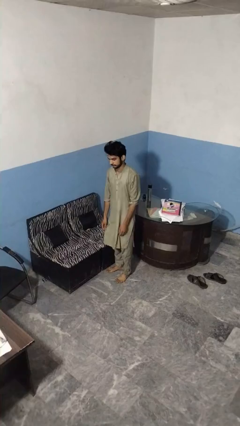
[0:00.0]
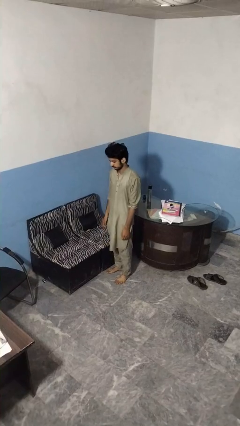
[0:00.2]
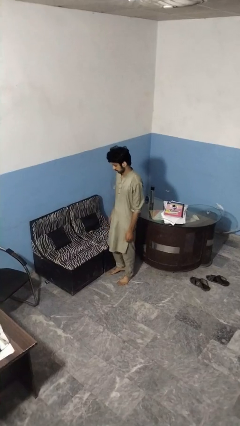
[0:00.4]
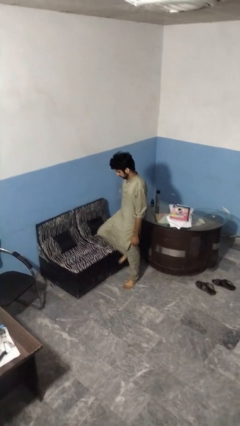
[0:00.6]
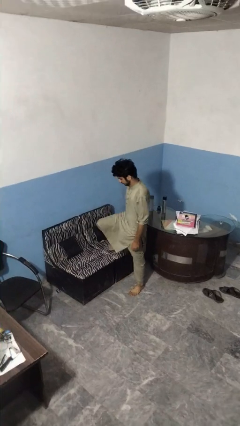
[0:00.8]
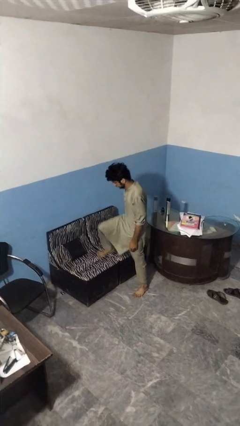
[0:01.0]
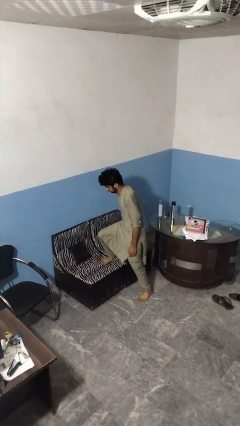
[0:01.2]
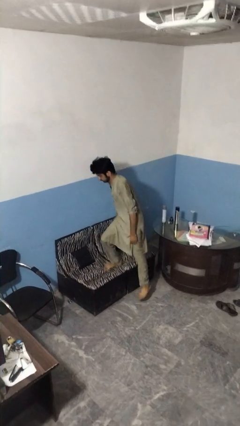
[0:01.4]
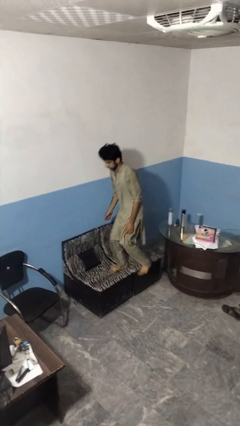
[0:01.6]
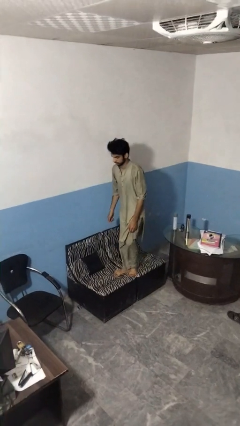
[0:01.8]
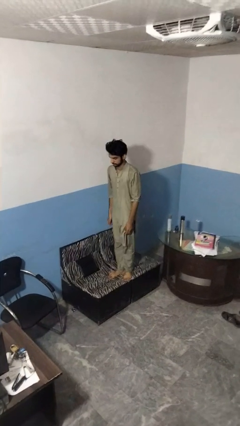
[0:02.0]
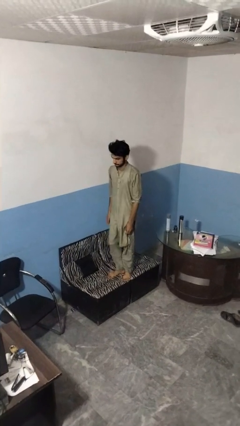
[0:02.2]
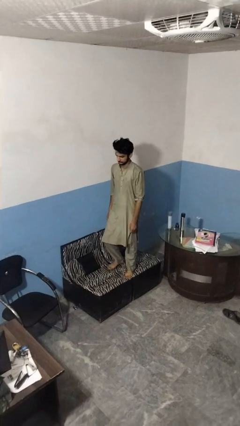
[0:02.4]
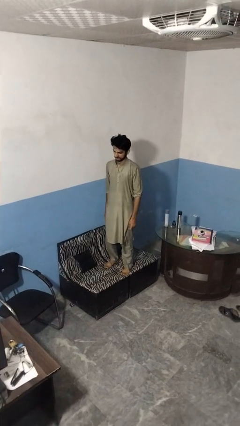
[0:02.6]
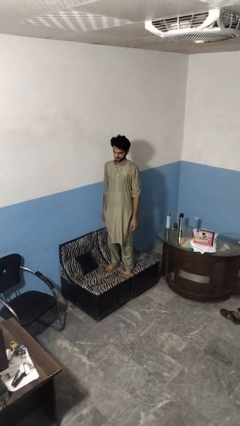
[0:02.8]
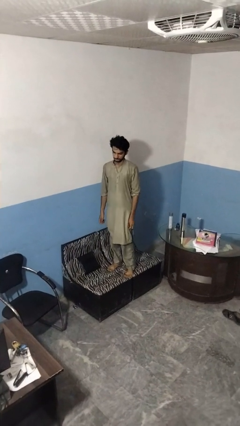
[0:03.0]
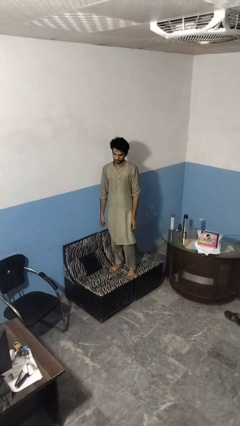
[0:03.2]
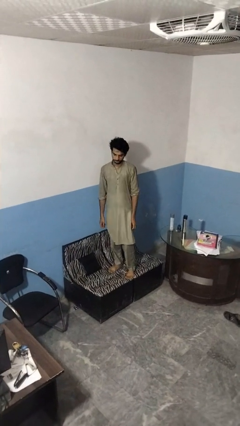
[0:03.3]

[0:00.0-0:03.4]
person climbs on couch

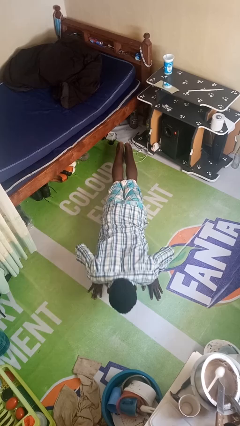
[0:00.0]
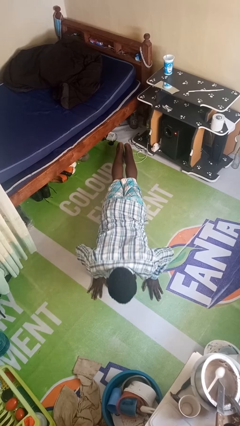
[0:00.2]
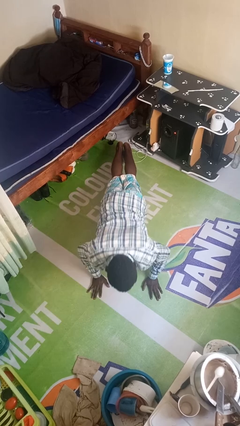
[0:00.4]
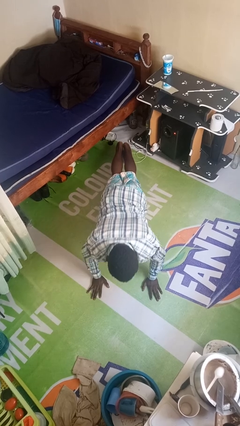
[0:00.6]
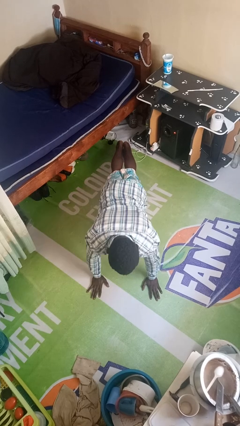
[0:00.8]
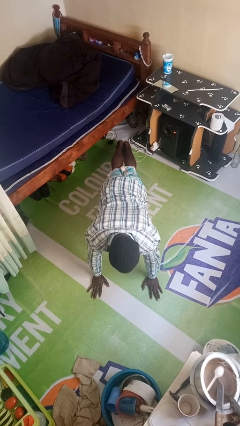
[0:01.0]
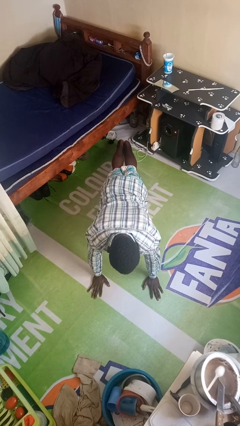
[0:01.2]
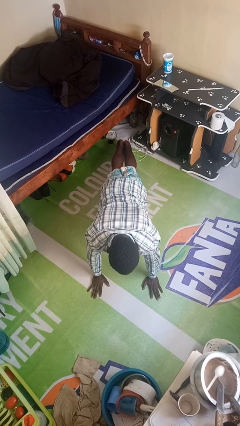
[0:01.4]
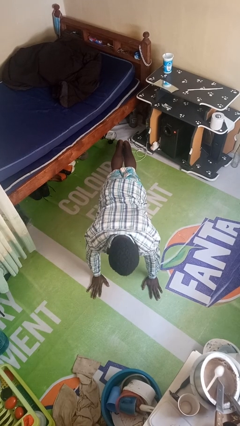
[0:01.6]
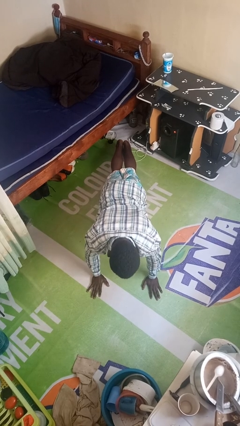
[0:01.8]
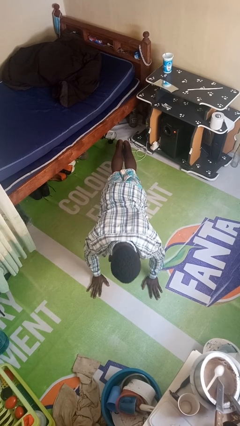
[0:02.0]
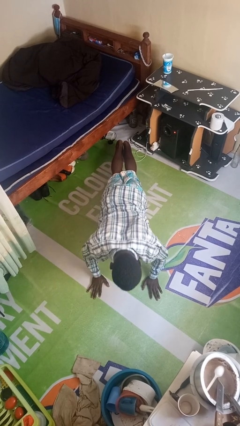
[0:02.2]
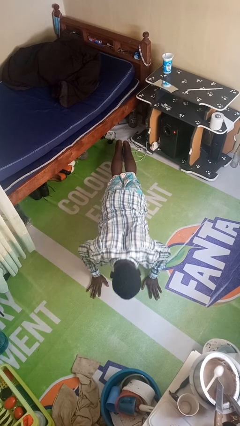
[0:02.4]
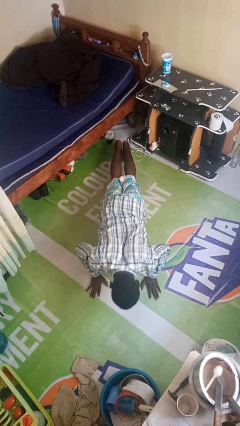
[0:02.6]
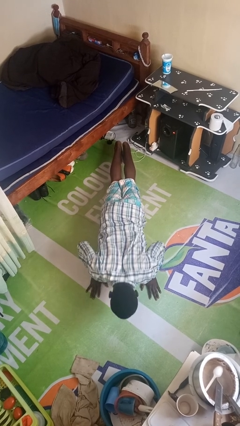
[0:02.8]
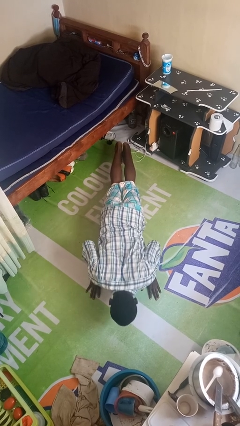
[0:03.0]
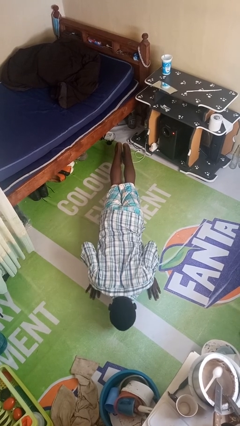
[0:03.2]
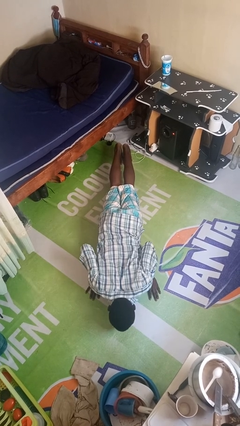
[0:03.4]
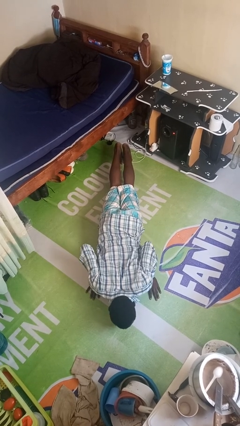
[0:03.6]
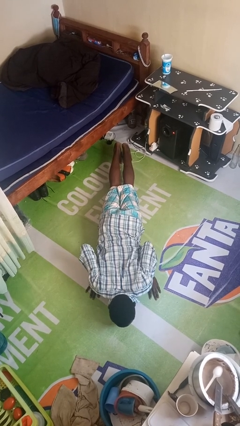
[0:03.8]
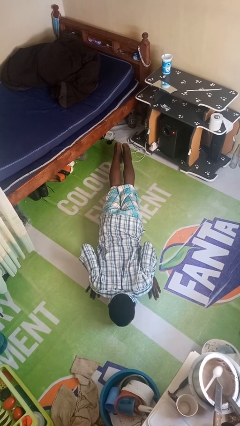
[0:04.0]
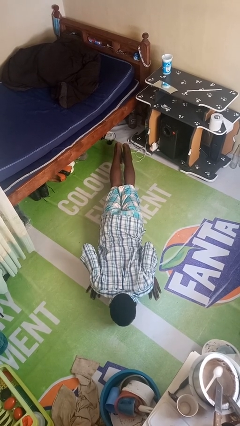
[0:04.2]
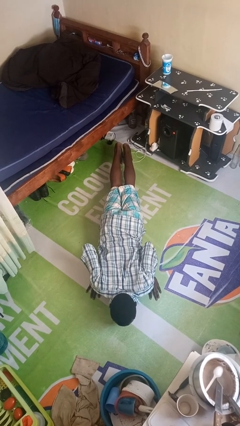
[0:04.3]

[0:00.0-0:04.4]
person exercises with pushup

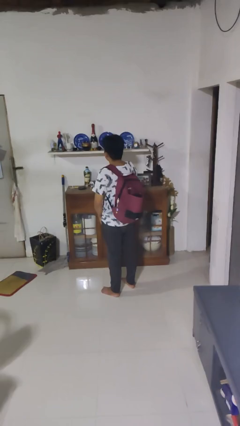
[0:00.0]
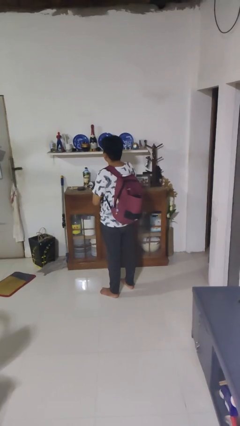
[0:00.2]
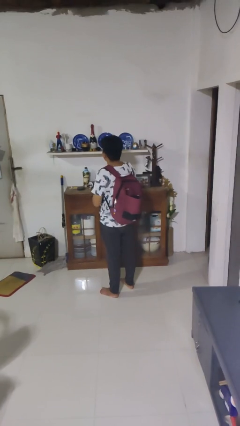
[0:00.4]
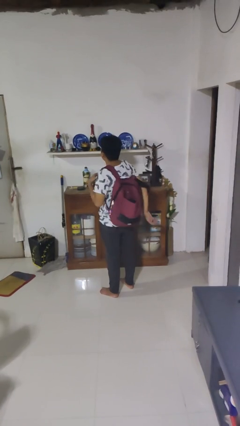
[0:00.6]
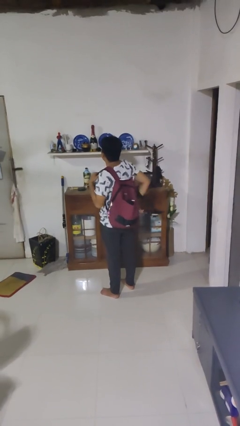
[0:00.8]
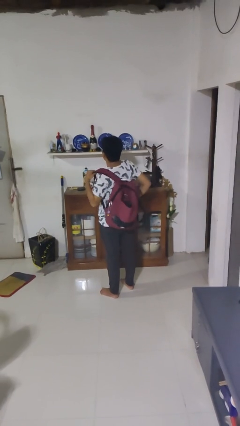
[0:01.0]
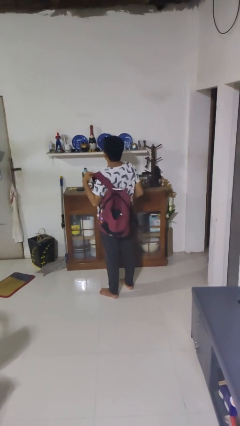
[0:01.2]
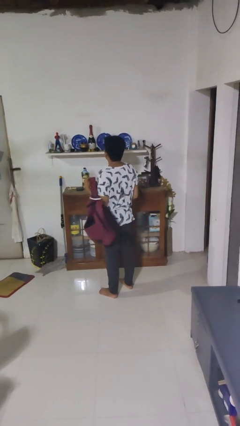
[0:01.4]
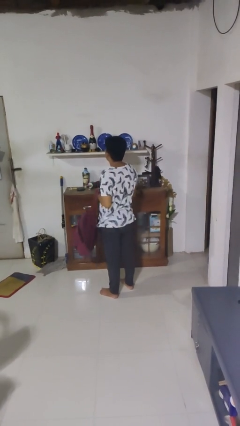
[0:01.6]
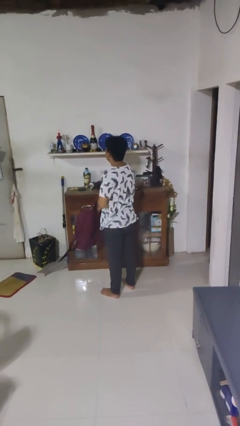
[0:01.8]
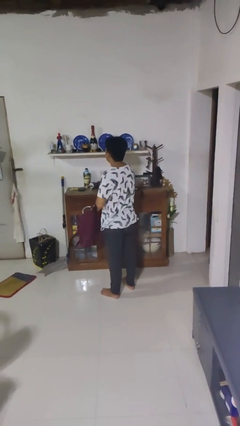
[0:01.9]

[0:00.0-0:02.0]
person takes off backpack

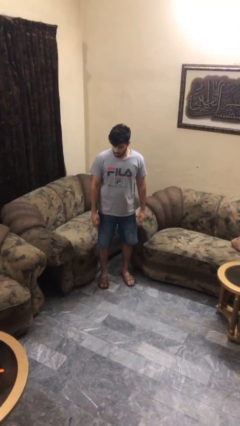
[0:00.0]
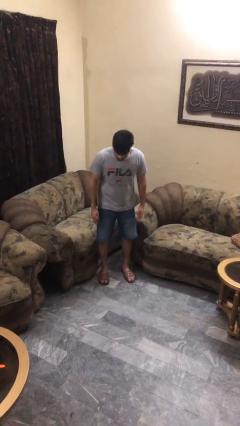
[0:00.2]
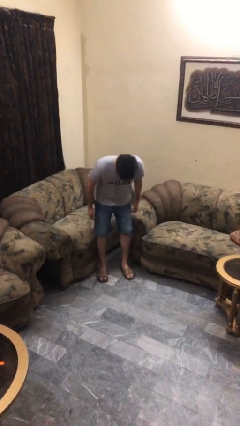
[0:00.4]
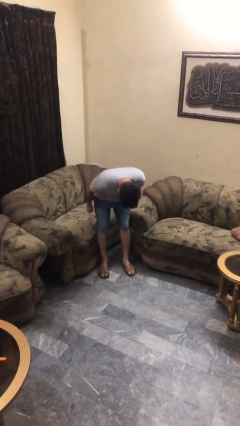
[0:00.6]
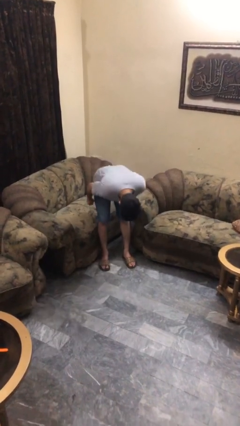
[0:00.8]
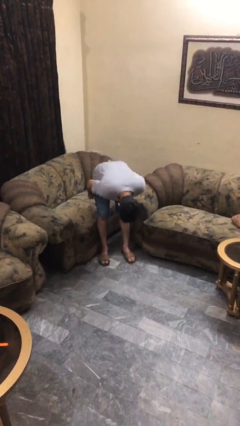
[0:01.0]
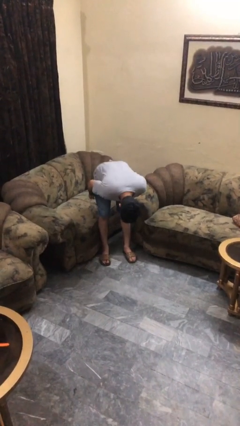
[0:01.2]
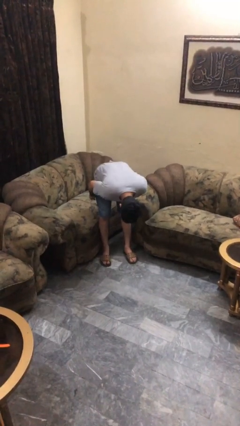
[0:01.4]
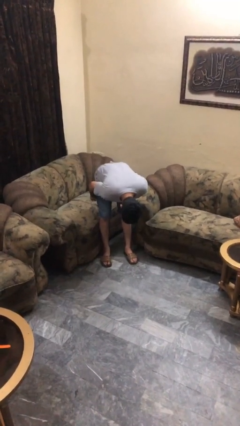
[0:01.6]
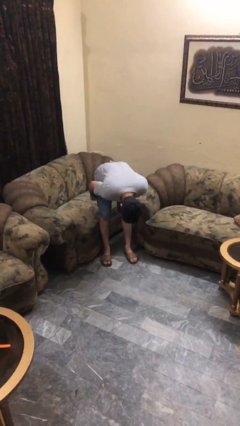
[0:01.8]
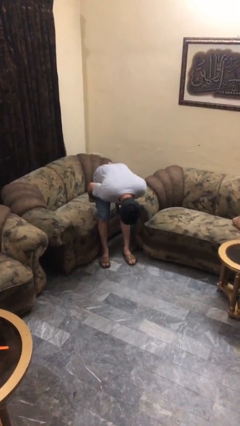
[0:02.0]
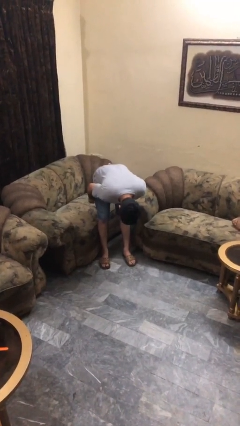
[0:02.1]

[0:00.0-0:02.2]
person bows

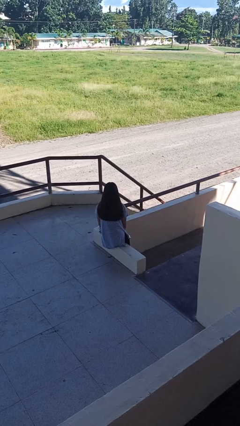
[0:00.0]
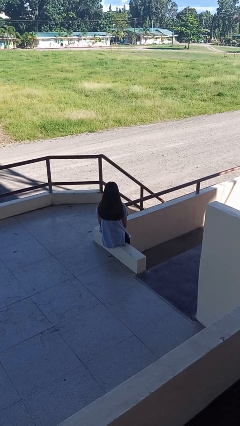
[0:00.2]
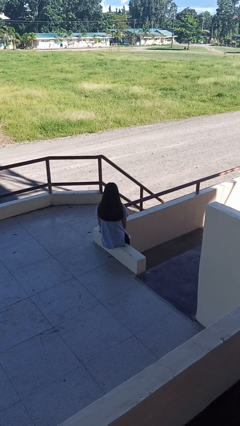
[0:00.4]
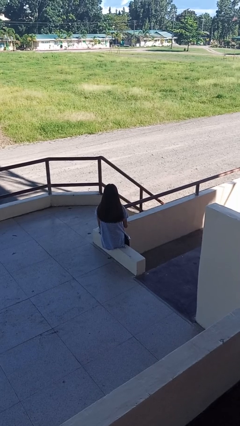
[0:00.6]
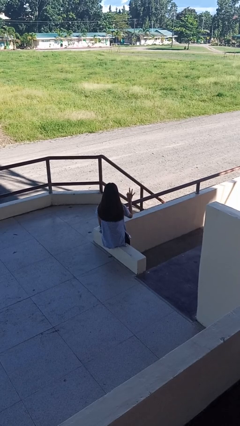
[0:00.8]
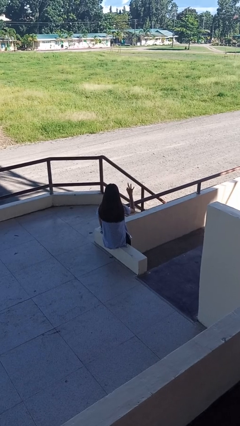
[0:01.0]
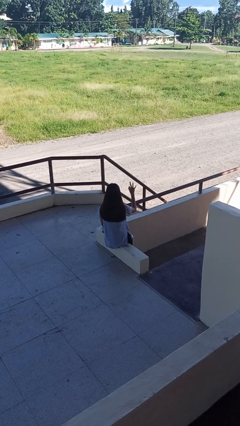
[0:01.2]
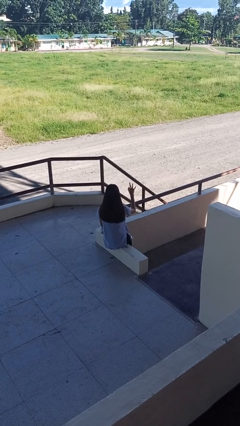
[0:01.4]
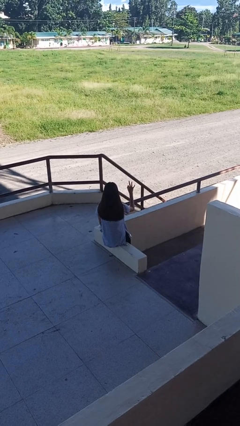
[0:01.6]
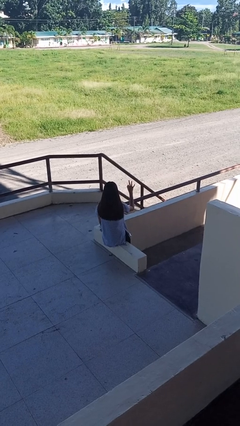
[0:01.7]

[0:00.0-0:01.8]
person gestures number three

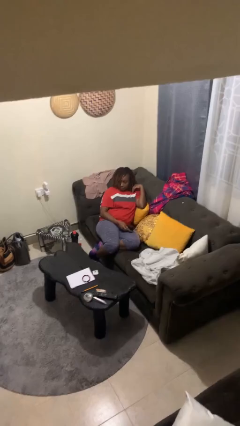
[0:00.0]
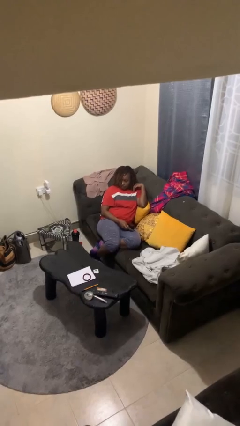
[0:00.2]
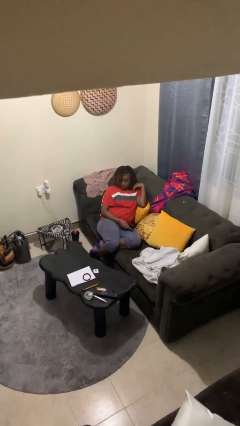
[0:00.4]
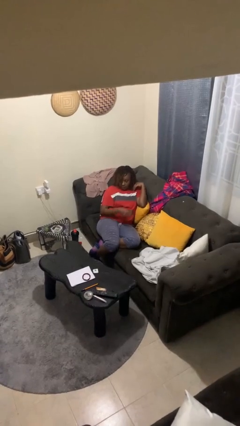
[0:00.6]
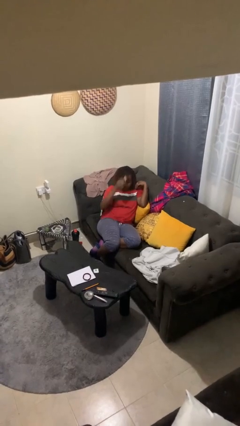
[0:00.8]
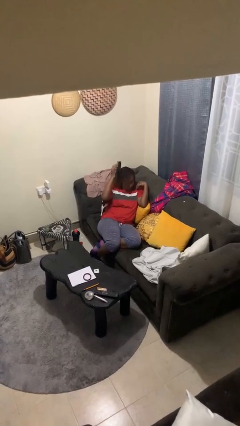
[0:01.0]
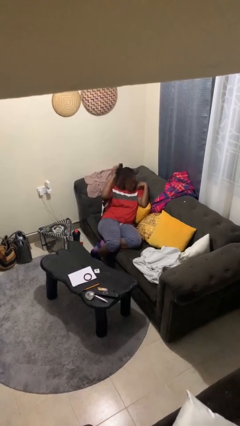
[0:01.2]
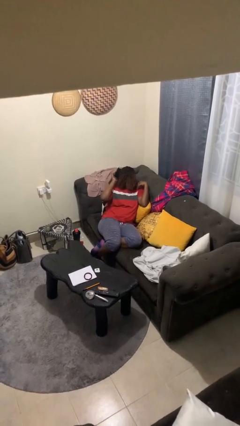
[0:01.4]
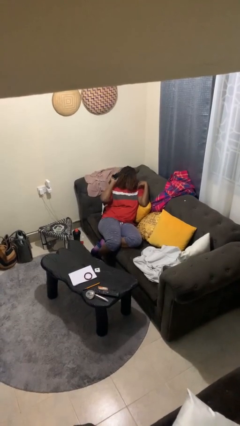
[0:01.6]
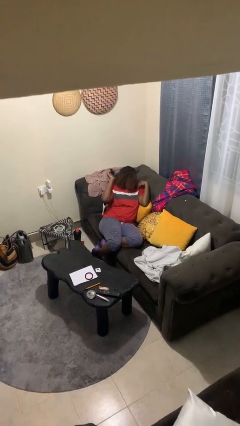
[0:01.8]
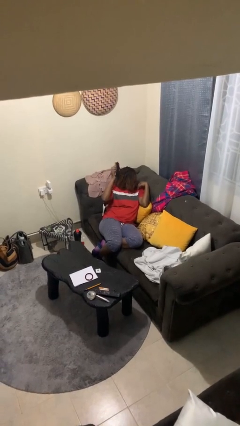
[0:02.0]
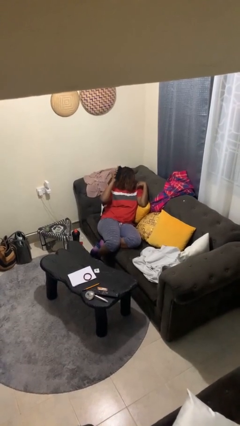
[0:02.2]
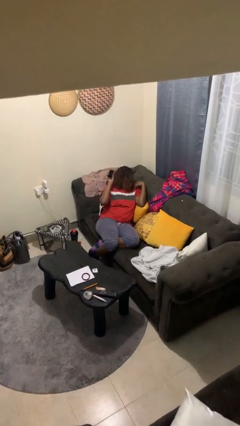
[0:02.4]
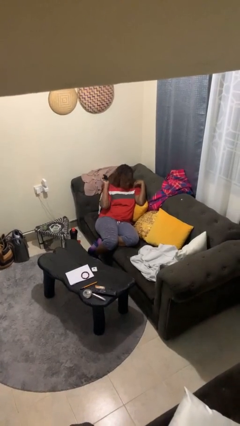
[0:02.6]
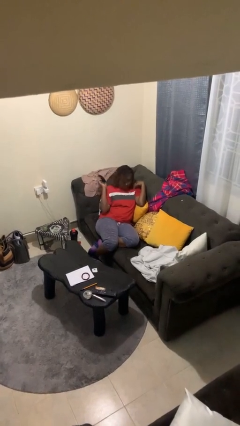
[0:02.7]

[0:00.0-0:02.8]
person brushes hair

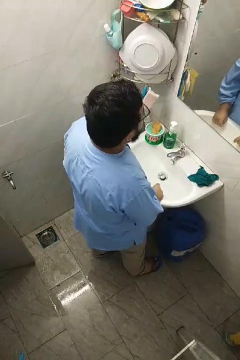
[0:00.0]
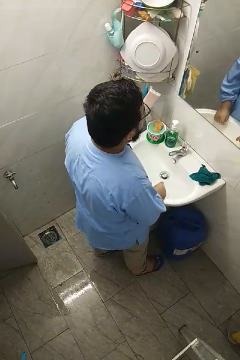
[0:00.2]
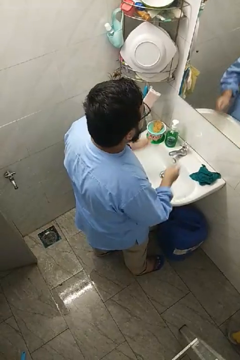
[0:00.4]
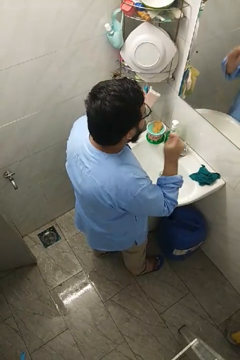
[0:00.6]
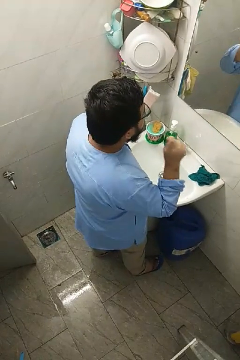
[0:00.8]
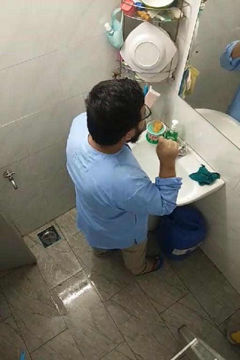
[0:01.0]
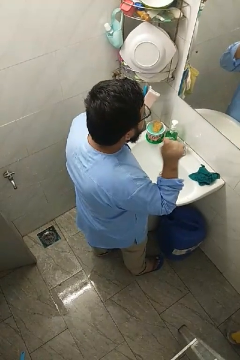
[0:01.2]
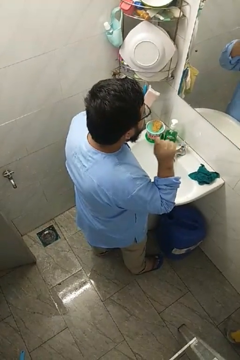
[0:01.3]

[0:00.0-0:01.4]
person flosses
